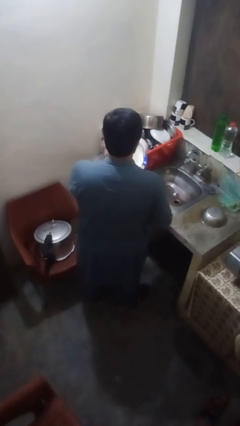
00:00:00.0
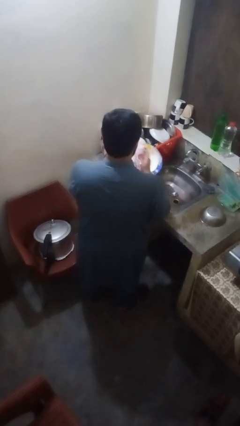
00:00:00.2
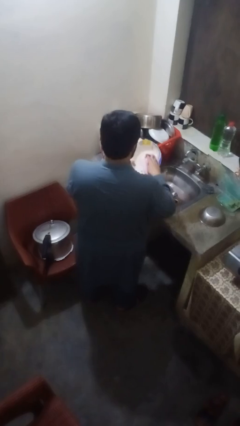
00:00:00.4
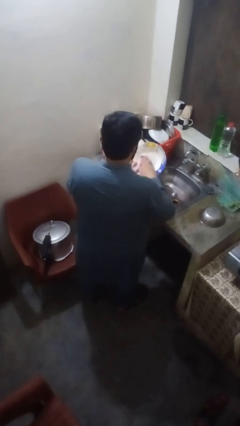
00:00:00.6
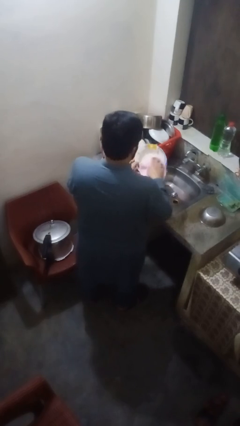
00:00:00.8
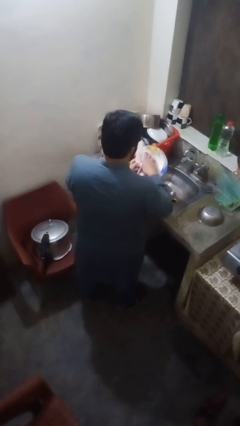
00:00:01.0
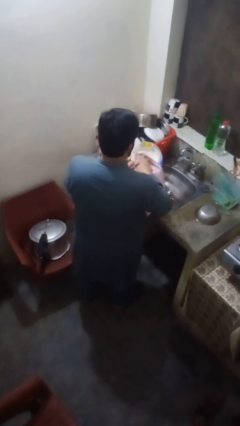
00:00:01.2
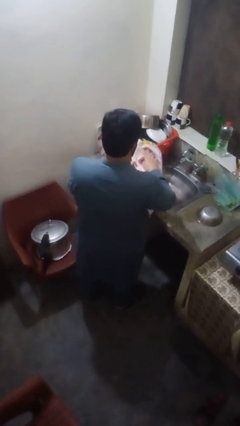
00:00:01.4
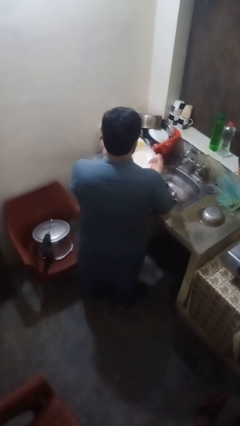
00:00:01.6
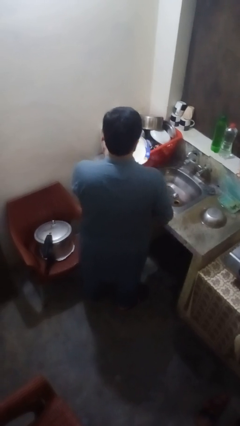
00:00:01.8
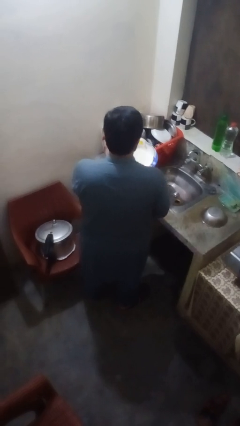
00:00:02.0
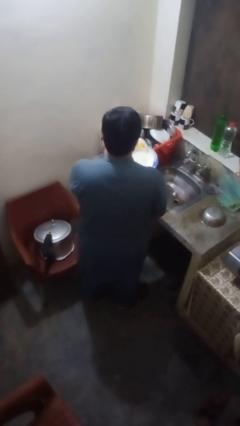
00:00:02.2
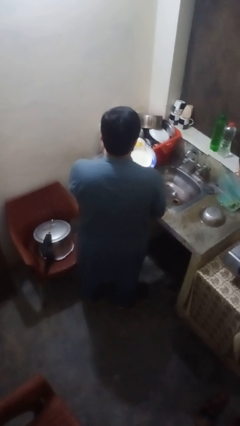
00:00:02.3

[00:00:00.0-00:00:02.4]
person dries dish

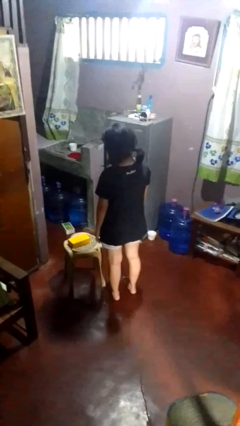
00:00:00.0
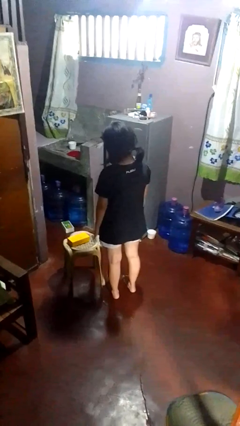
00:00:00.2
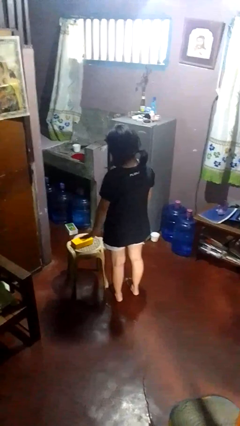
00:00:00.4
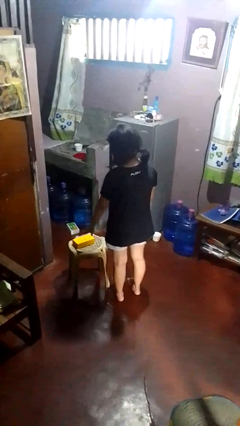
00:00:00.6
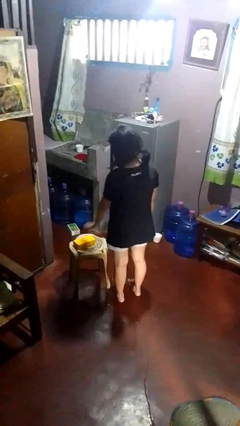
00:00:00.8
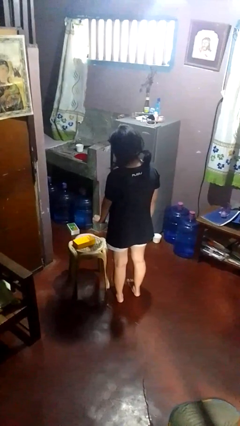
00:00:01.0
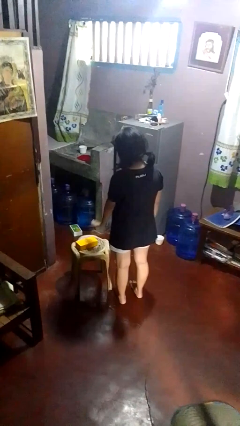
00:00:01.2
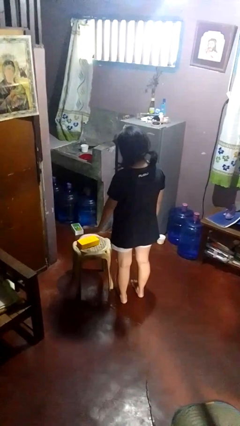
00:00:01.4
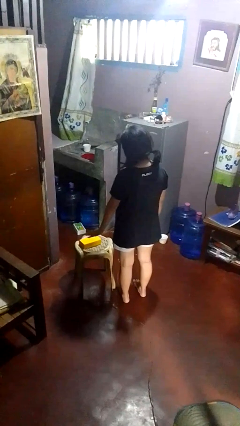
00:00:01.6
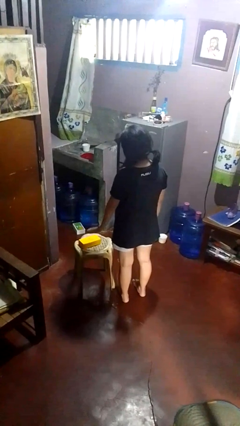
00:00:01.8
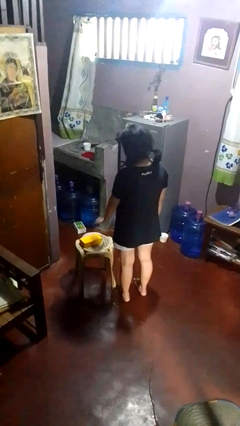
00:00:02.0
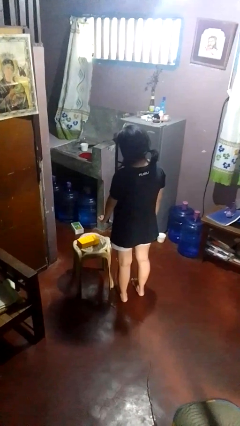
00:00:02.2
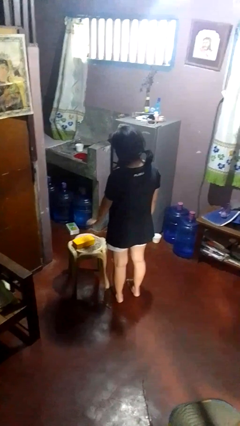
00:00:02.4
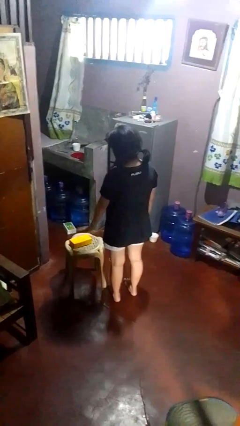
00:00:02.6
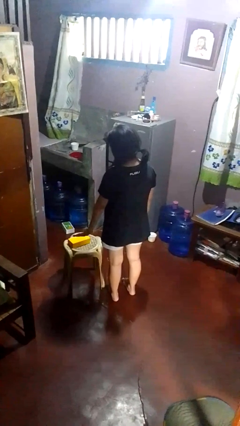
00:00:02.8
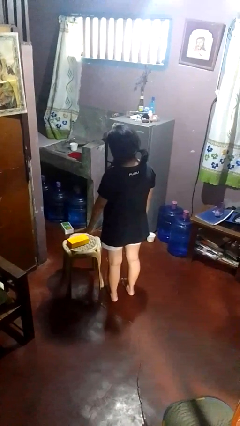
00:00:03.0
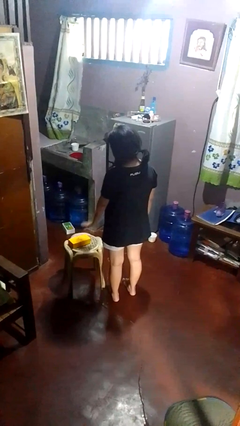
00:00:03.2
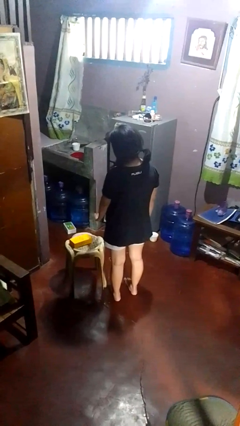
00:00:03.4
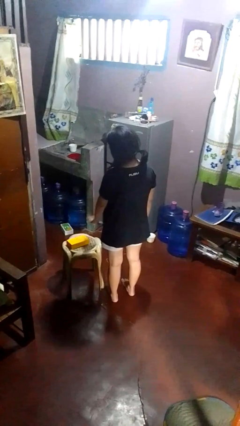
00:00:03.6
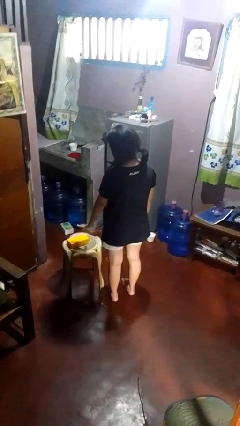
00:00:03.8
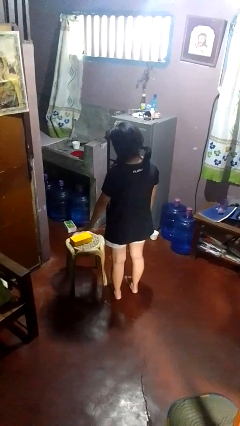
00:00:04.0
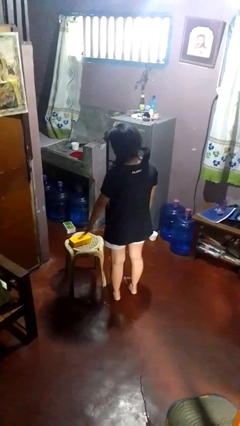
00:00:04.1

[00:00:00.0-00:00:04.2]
person waves hand over object

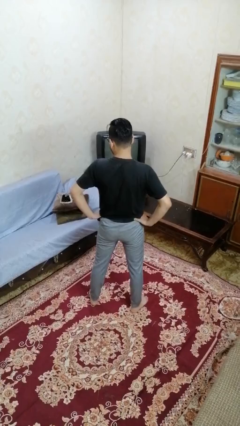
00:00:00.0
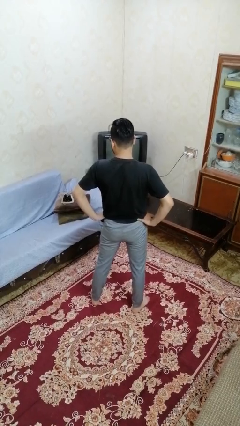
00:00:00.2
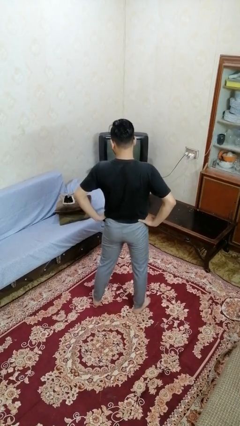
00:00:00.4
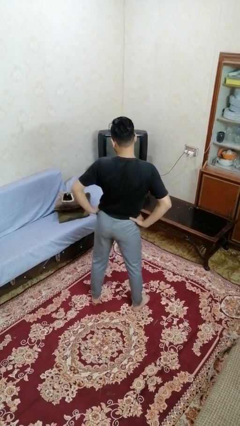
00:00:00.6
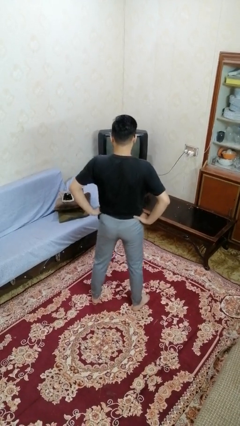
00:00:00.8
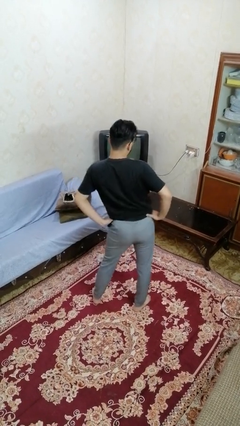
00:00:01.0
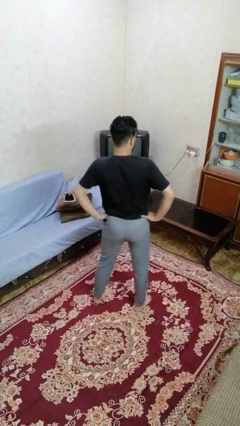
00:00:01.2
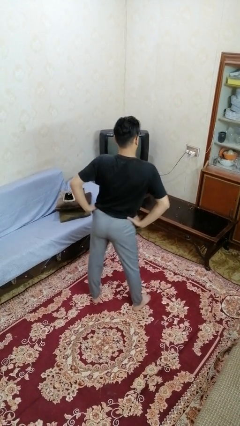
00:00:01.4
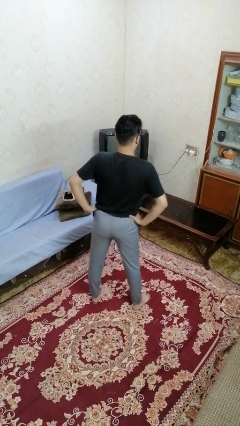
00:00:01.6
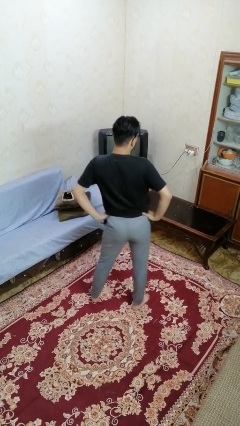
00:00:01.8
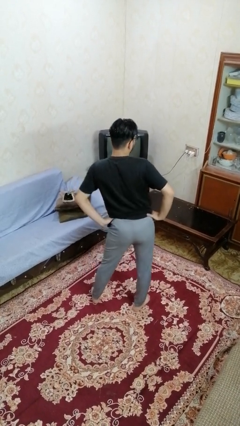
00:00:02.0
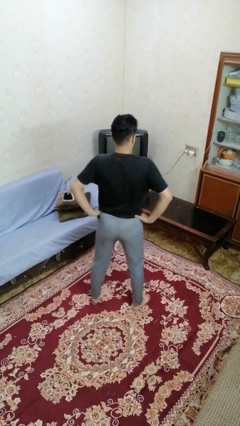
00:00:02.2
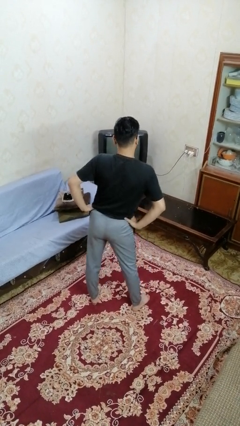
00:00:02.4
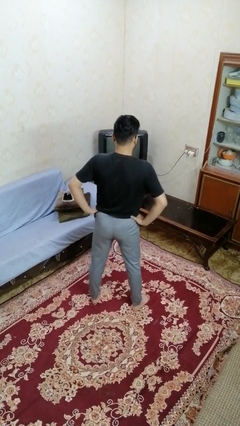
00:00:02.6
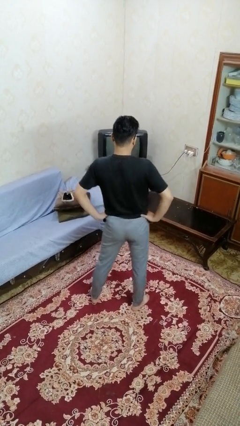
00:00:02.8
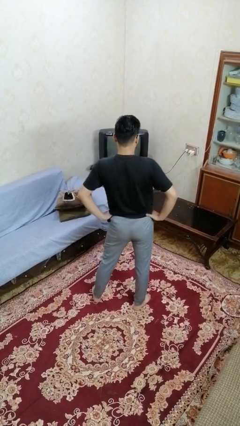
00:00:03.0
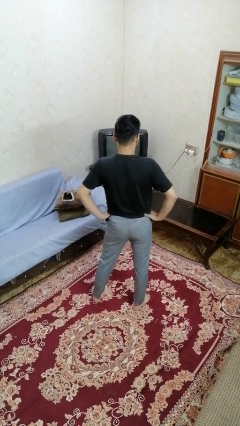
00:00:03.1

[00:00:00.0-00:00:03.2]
person wiggles hips

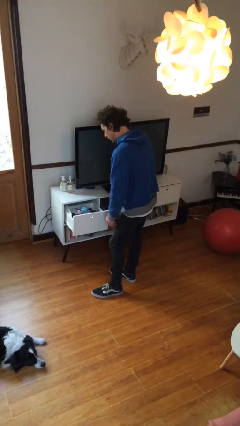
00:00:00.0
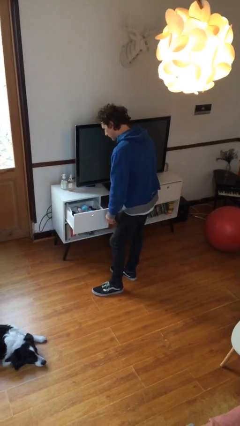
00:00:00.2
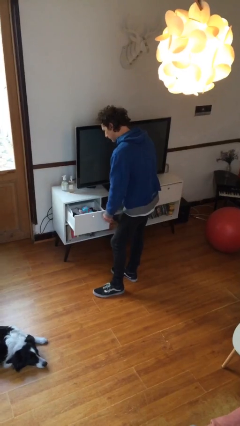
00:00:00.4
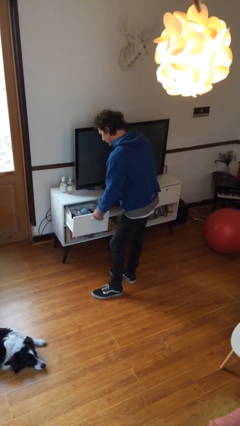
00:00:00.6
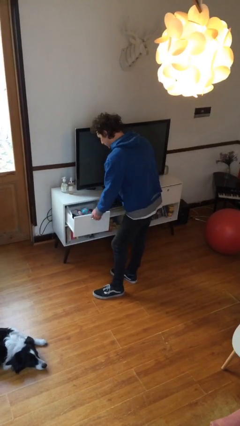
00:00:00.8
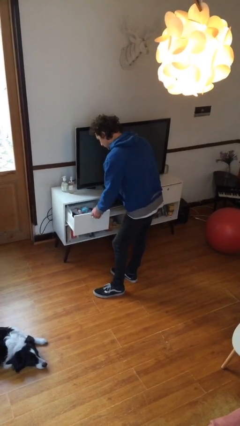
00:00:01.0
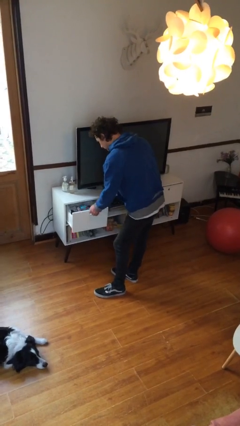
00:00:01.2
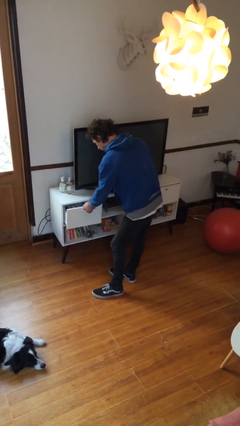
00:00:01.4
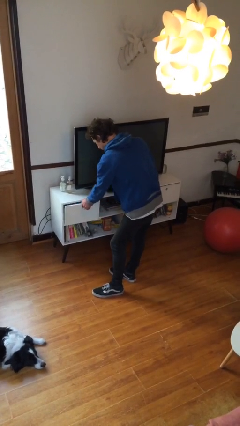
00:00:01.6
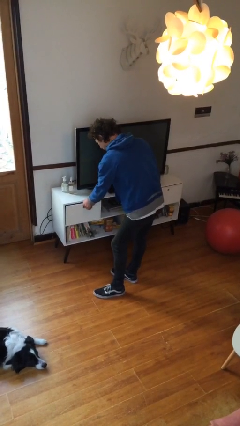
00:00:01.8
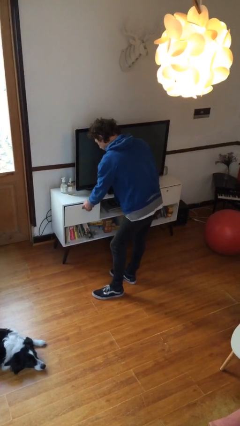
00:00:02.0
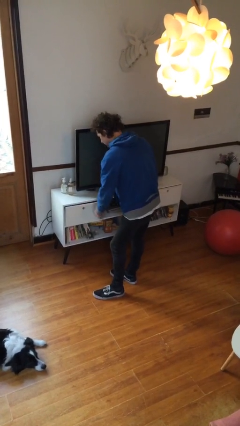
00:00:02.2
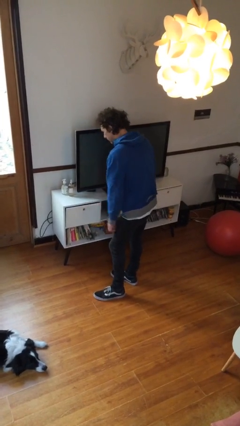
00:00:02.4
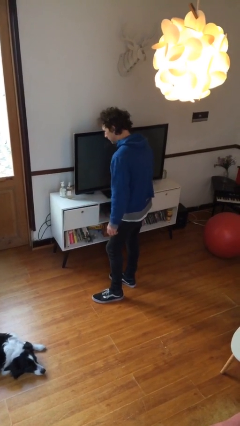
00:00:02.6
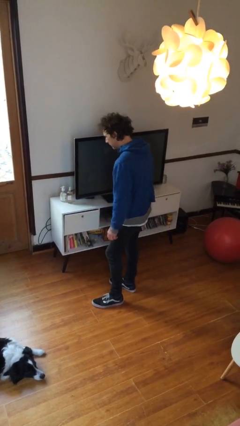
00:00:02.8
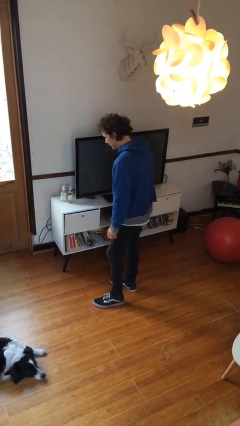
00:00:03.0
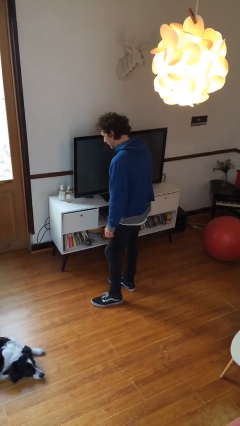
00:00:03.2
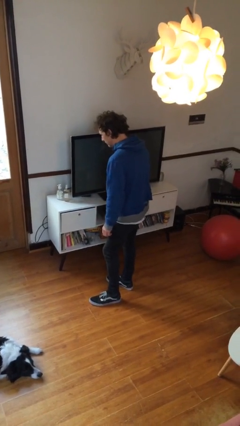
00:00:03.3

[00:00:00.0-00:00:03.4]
person closes dresser drawer

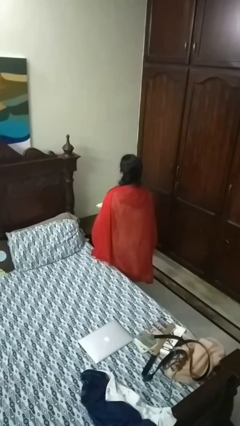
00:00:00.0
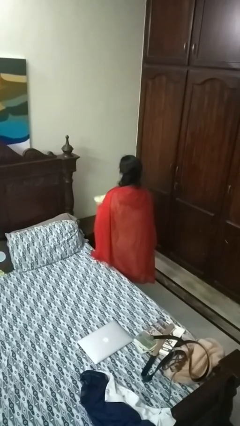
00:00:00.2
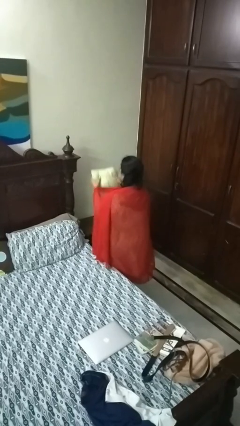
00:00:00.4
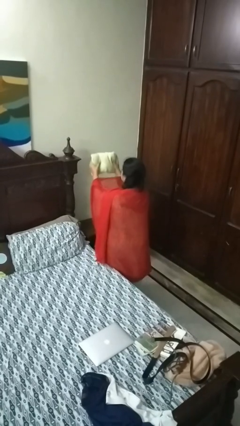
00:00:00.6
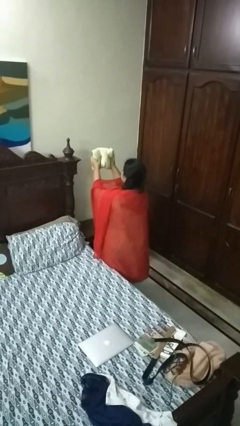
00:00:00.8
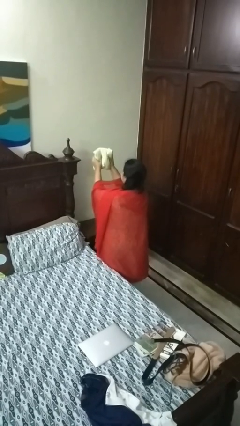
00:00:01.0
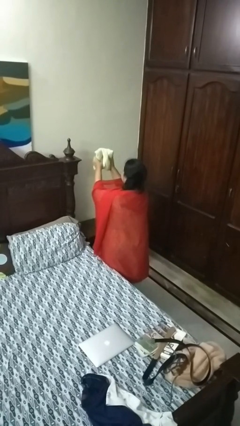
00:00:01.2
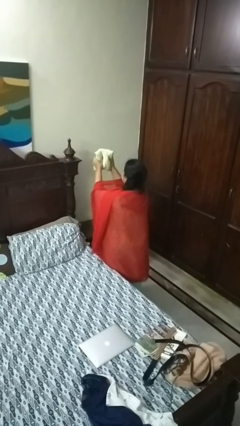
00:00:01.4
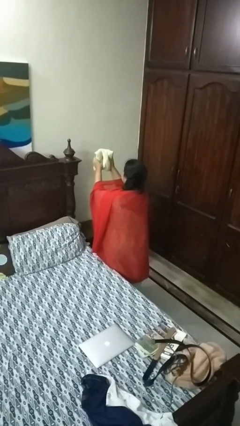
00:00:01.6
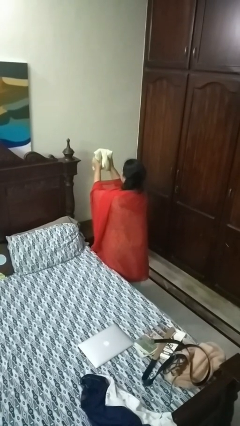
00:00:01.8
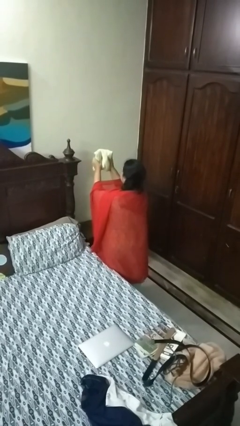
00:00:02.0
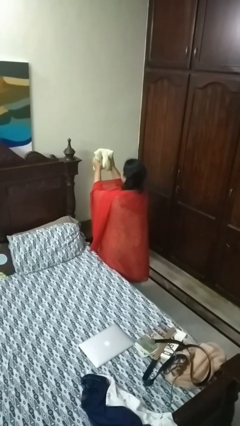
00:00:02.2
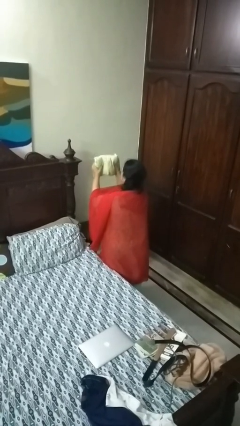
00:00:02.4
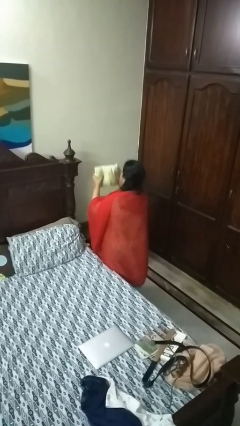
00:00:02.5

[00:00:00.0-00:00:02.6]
person squeezes object

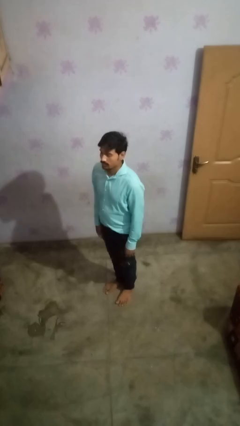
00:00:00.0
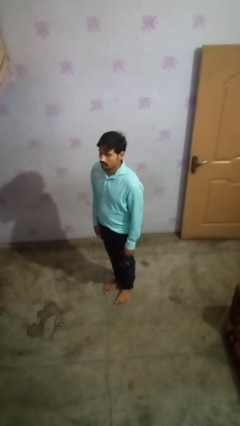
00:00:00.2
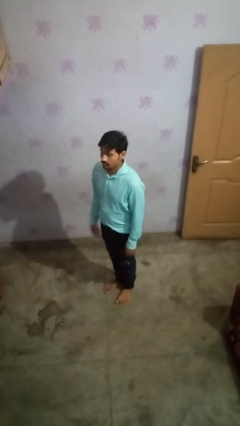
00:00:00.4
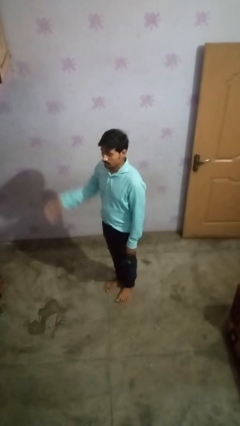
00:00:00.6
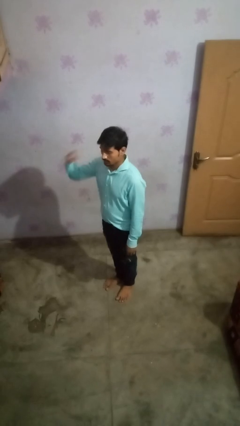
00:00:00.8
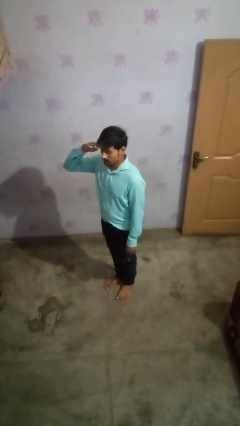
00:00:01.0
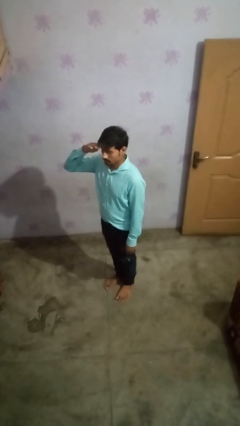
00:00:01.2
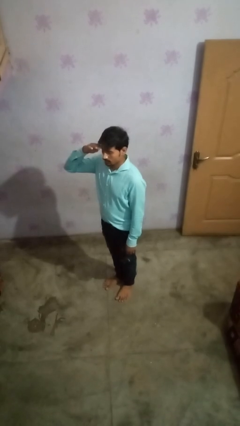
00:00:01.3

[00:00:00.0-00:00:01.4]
person salutes

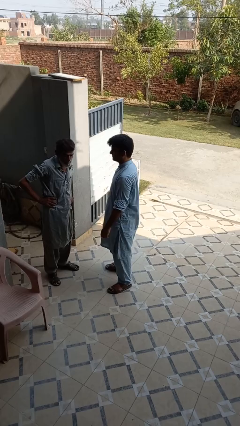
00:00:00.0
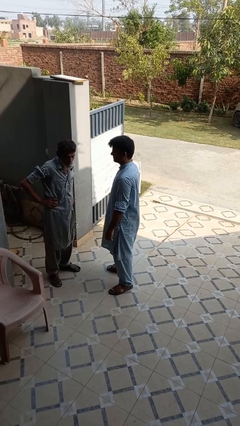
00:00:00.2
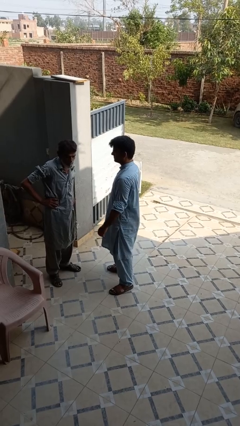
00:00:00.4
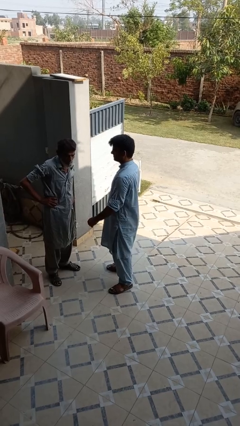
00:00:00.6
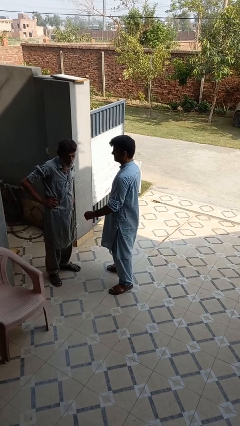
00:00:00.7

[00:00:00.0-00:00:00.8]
person touches face of person
